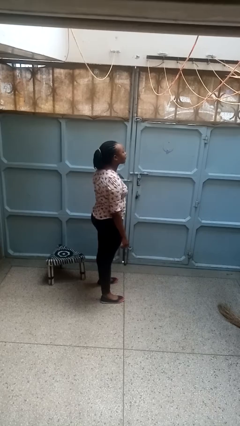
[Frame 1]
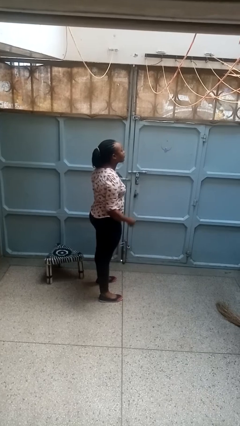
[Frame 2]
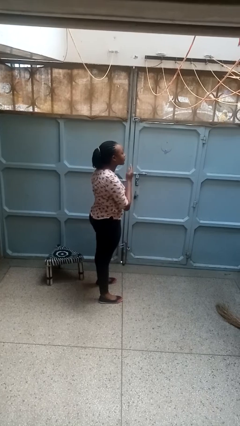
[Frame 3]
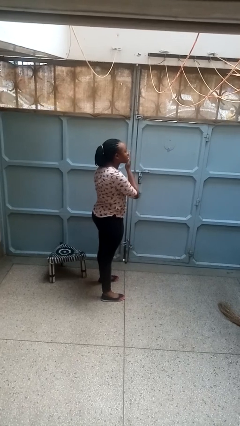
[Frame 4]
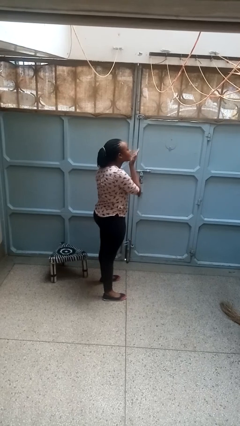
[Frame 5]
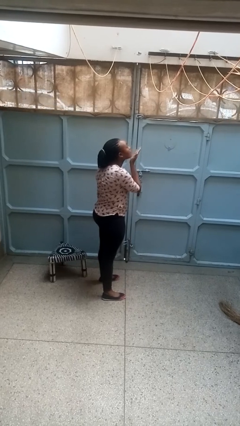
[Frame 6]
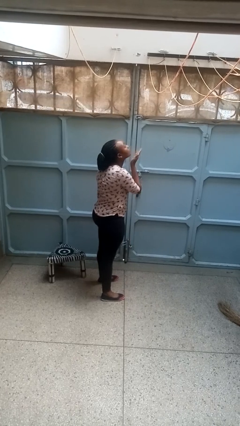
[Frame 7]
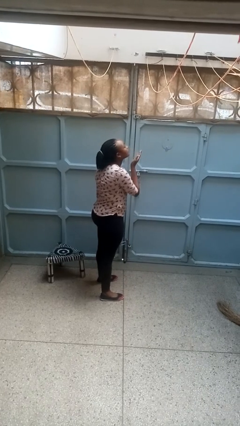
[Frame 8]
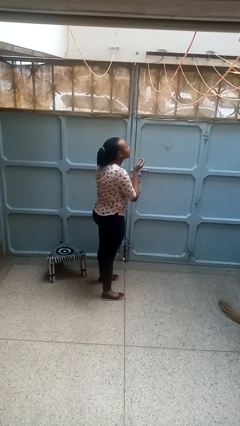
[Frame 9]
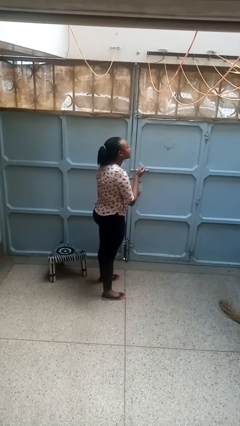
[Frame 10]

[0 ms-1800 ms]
person gestures blow kiss

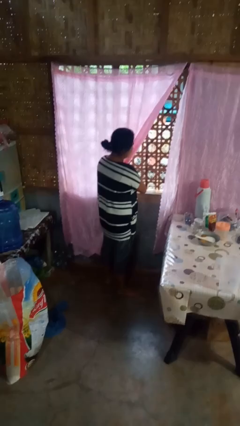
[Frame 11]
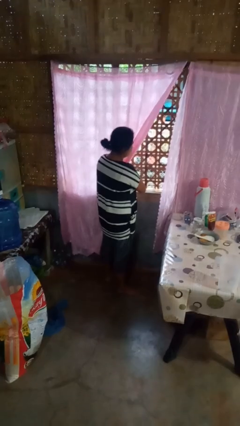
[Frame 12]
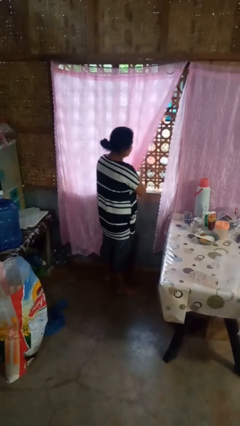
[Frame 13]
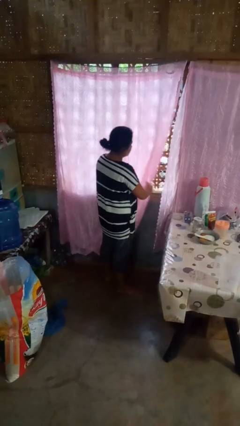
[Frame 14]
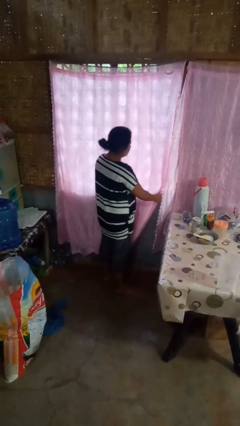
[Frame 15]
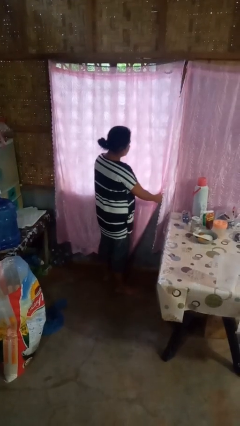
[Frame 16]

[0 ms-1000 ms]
person closes curtains

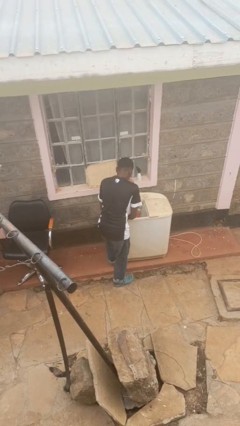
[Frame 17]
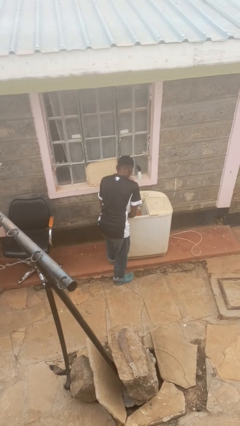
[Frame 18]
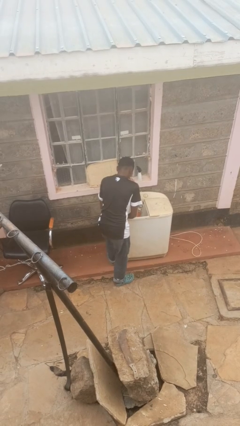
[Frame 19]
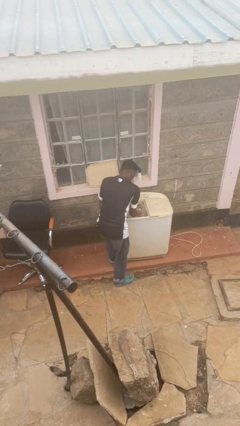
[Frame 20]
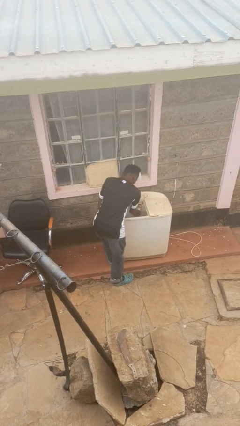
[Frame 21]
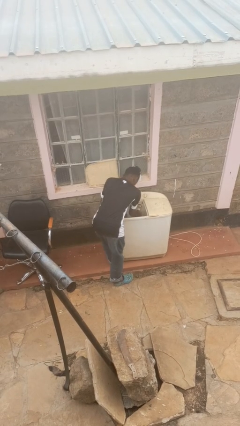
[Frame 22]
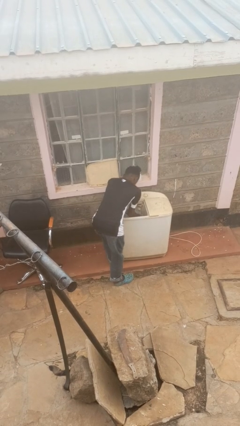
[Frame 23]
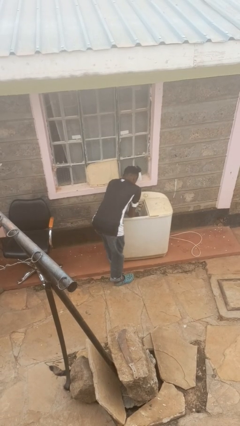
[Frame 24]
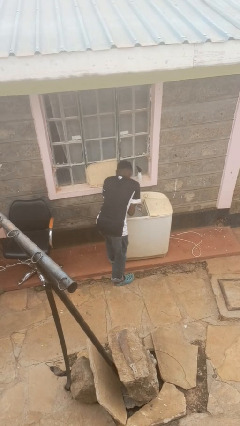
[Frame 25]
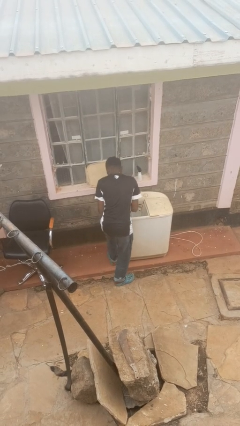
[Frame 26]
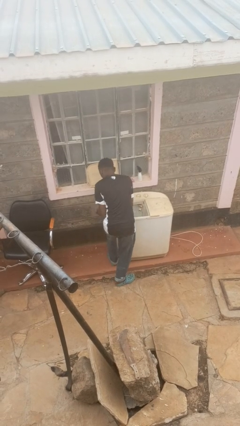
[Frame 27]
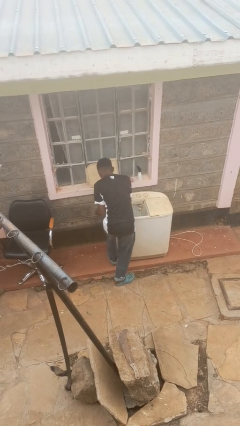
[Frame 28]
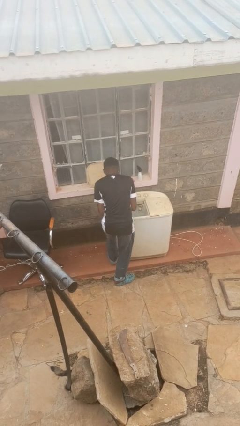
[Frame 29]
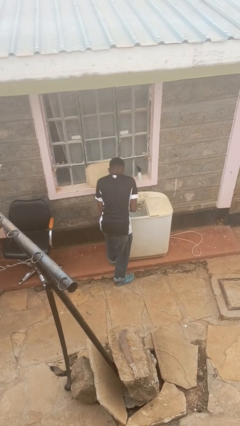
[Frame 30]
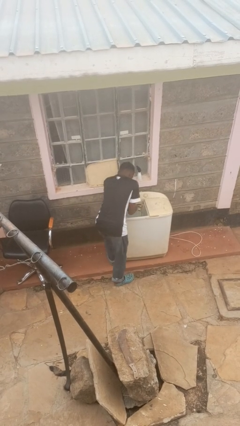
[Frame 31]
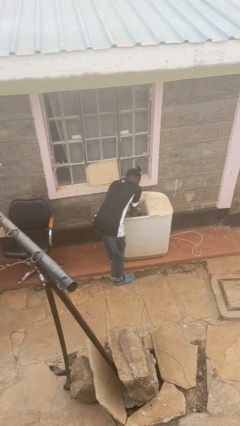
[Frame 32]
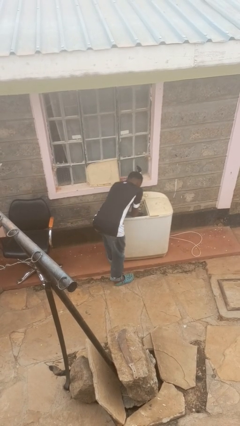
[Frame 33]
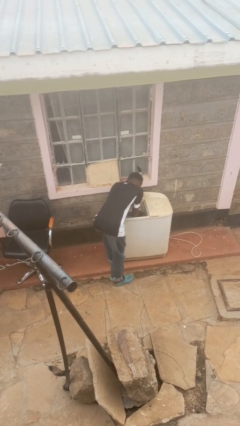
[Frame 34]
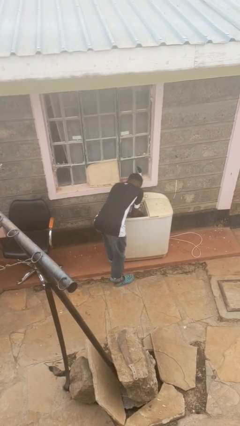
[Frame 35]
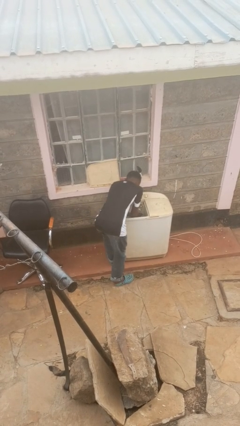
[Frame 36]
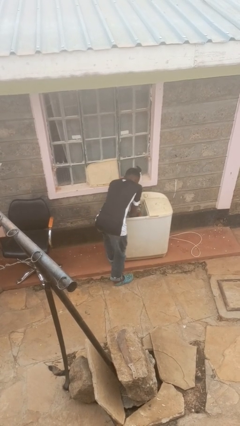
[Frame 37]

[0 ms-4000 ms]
person cleans dryer lint trap

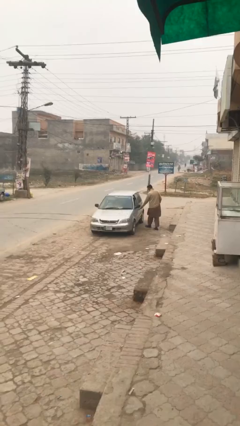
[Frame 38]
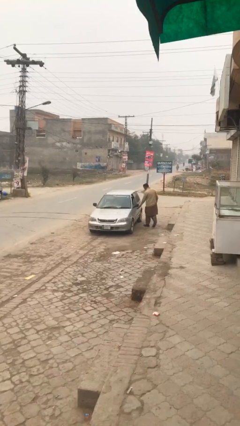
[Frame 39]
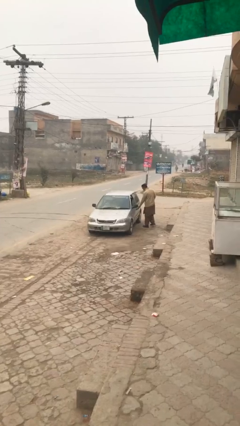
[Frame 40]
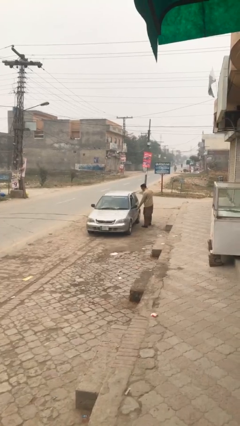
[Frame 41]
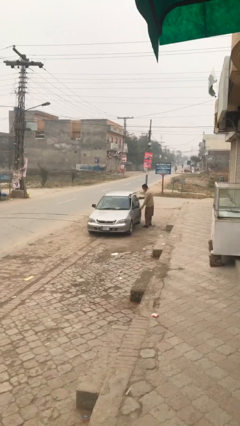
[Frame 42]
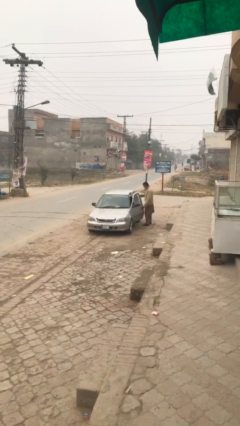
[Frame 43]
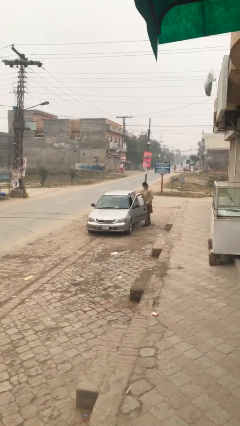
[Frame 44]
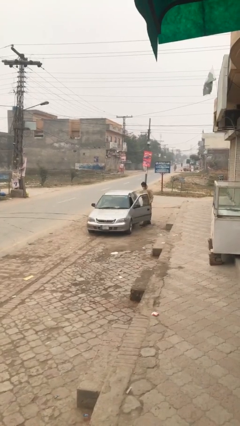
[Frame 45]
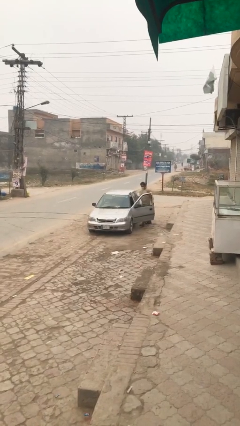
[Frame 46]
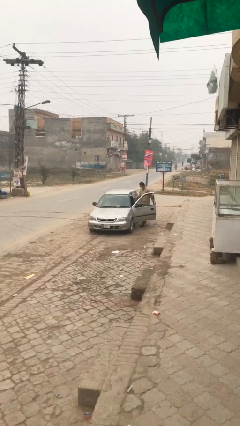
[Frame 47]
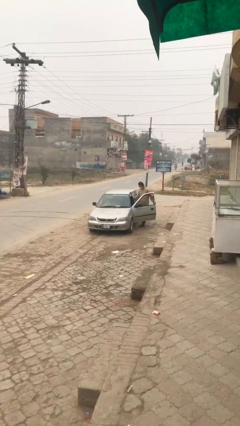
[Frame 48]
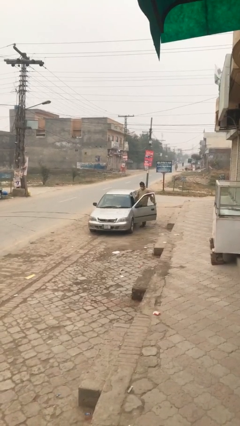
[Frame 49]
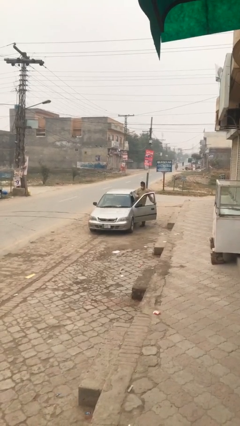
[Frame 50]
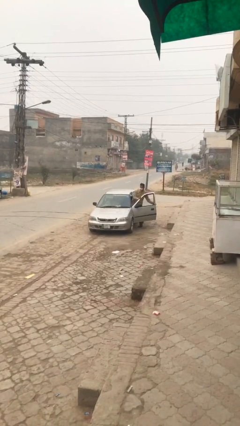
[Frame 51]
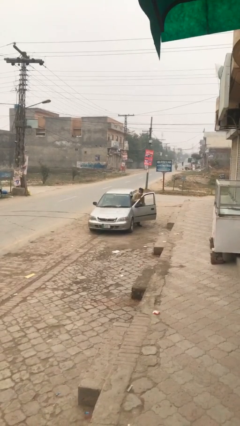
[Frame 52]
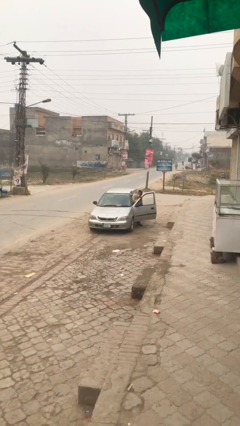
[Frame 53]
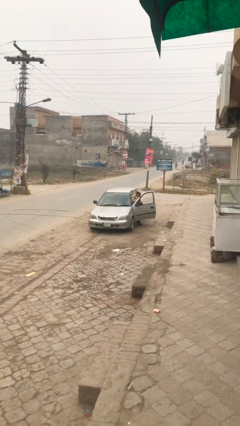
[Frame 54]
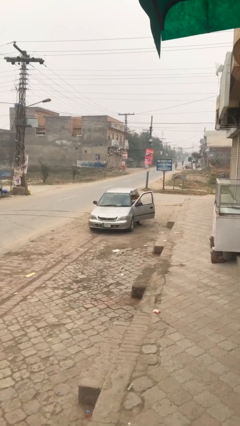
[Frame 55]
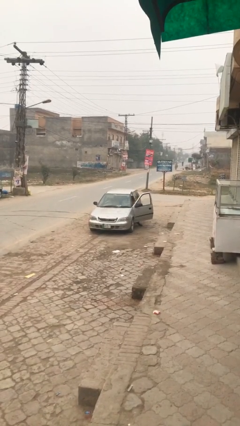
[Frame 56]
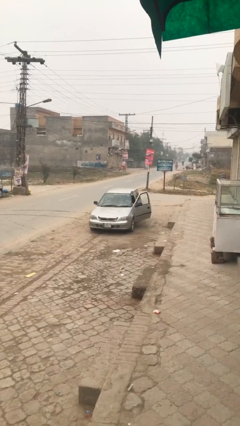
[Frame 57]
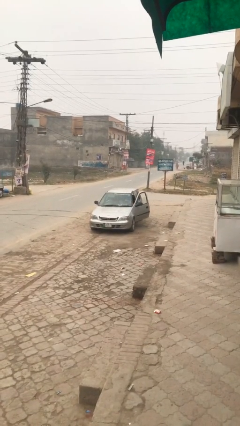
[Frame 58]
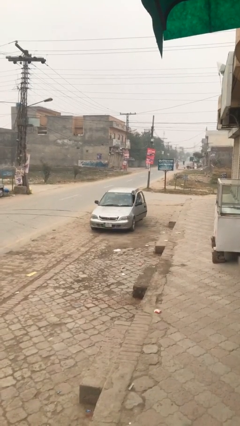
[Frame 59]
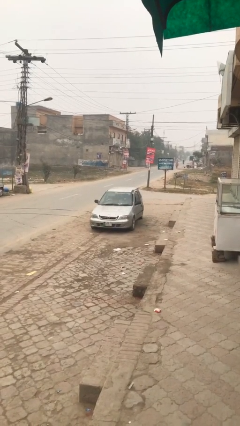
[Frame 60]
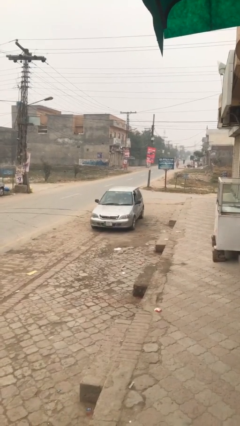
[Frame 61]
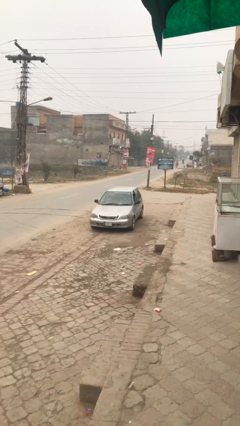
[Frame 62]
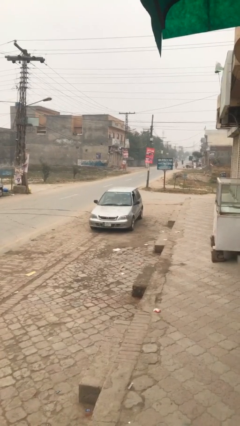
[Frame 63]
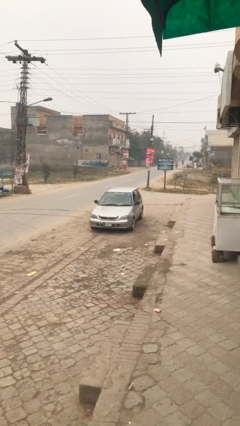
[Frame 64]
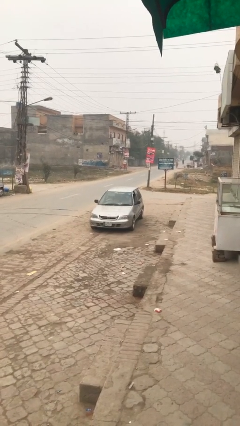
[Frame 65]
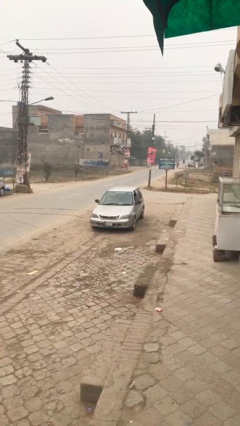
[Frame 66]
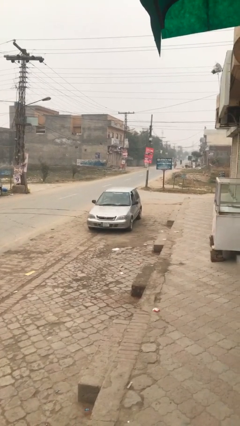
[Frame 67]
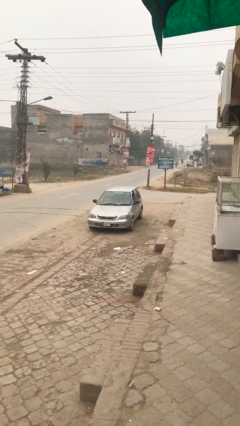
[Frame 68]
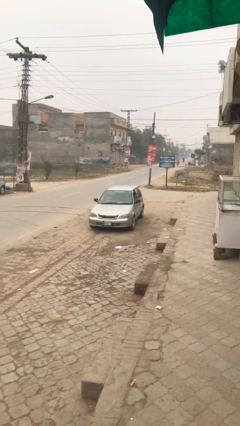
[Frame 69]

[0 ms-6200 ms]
car picks up person

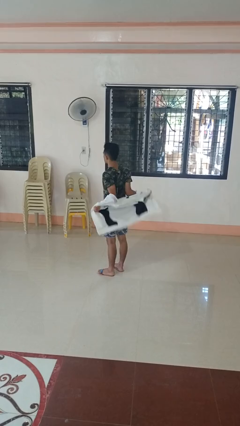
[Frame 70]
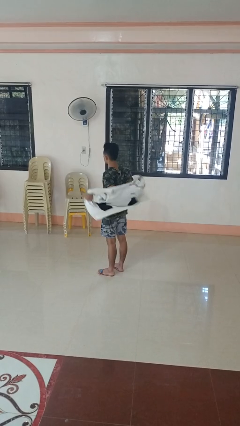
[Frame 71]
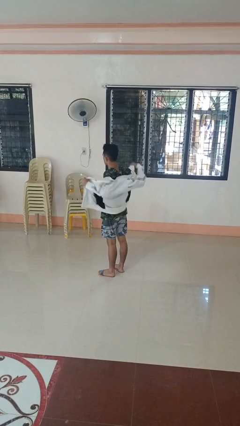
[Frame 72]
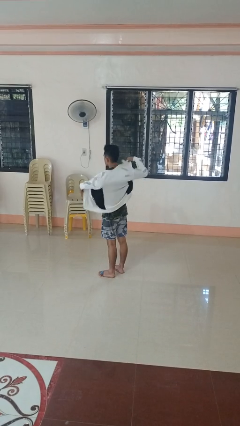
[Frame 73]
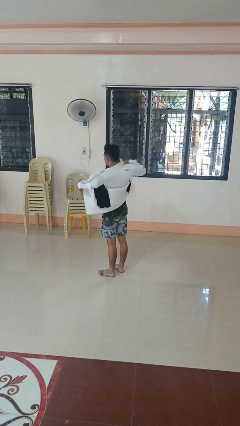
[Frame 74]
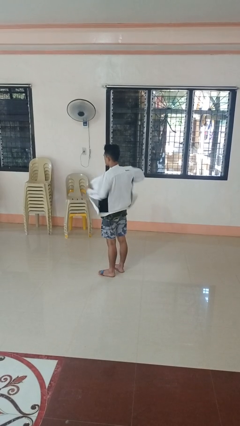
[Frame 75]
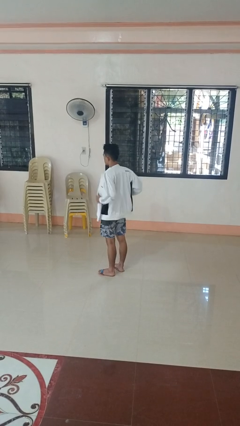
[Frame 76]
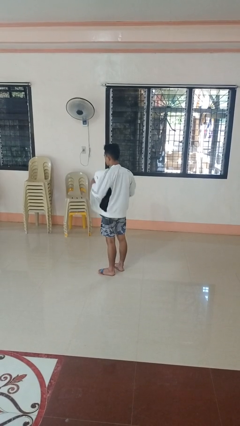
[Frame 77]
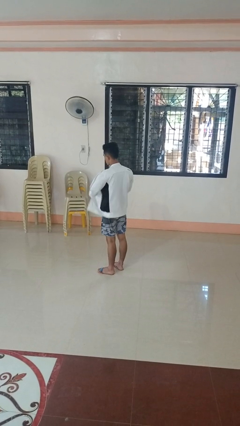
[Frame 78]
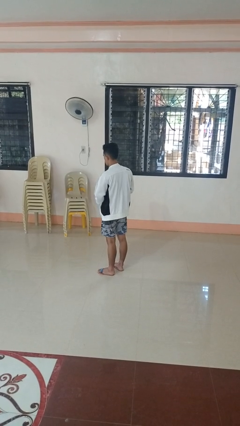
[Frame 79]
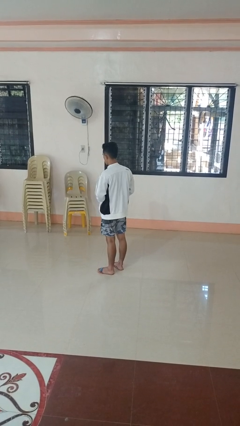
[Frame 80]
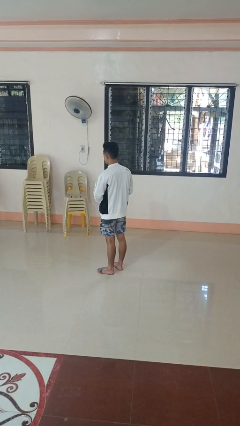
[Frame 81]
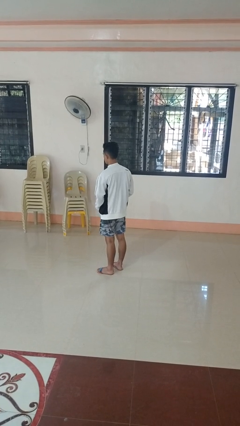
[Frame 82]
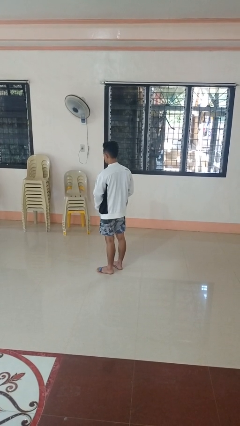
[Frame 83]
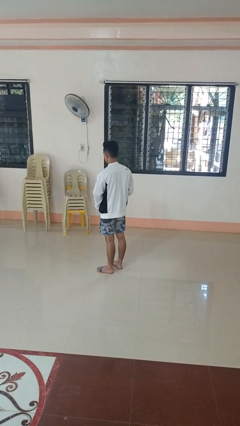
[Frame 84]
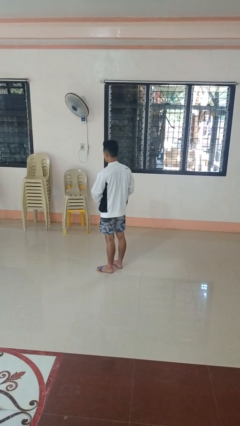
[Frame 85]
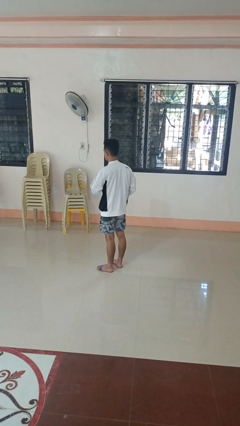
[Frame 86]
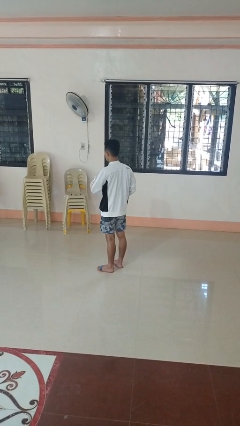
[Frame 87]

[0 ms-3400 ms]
person puts on jacket

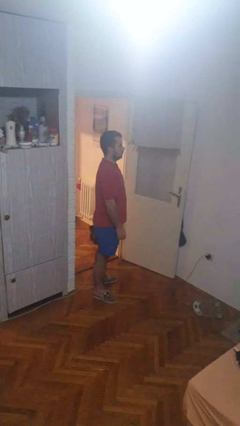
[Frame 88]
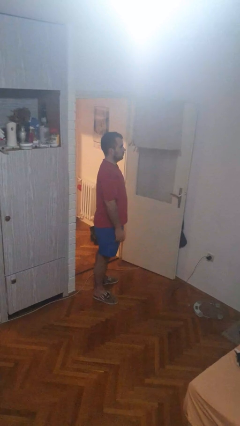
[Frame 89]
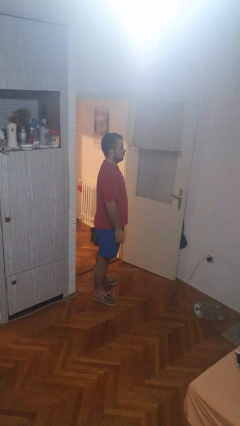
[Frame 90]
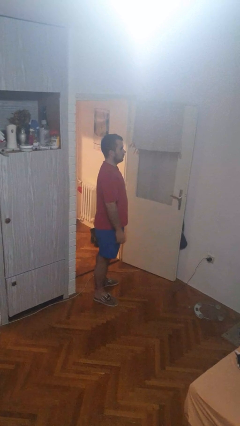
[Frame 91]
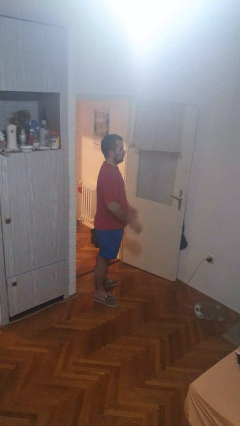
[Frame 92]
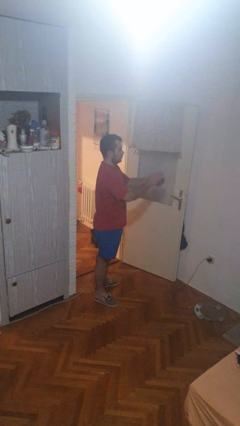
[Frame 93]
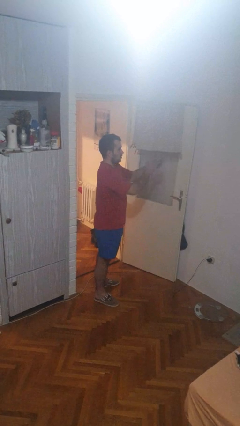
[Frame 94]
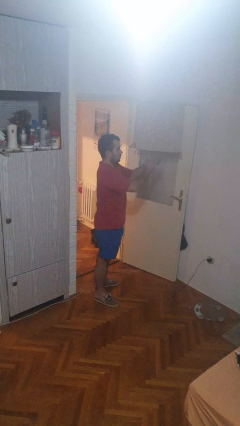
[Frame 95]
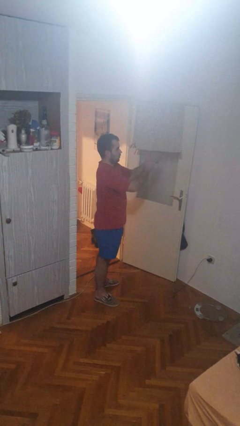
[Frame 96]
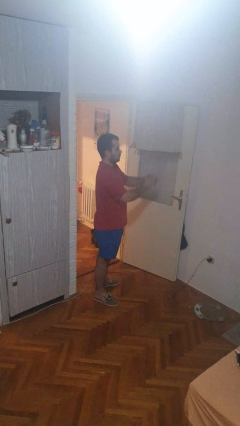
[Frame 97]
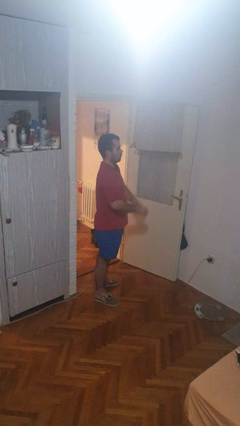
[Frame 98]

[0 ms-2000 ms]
person claps hands
